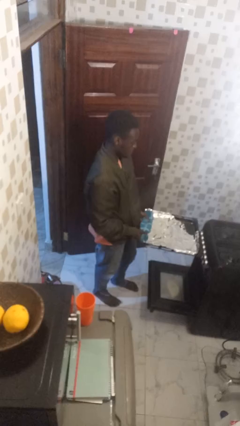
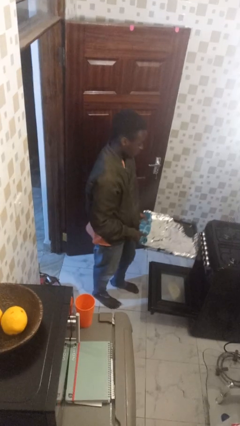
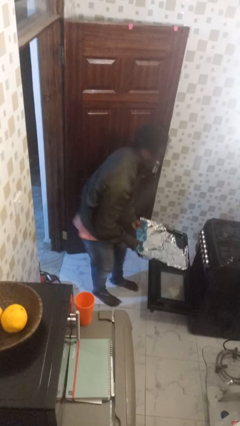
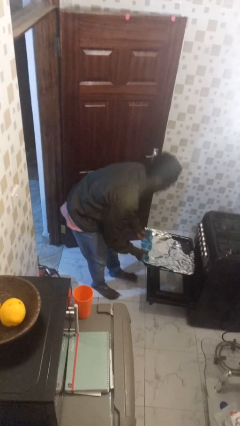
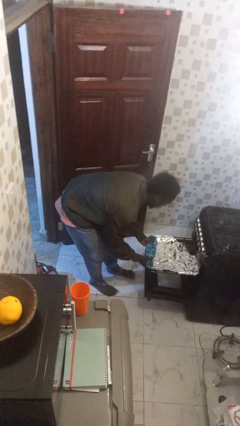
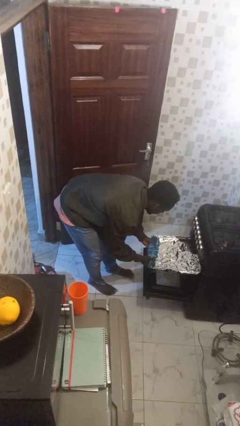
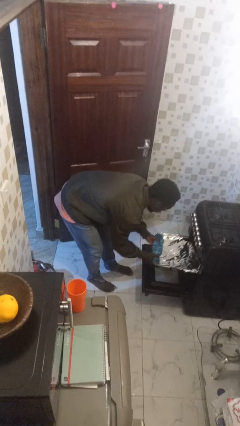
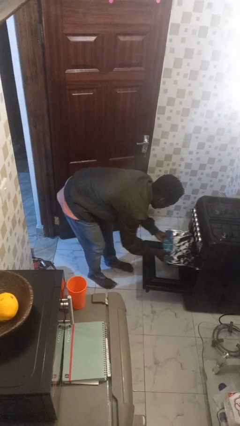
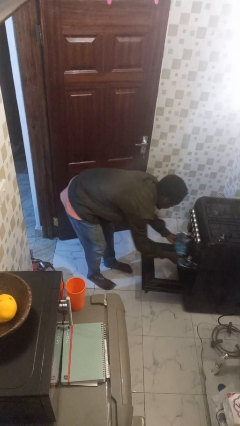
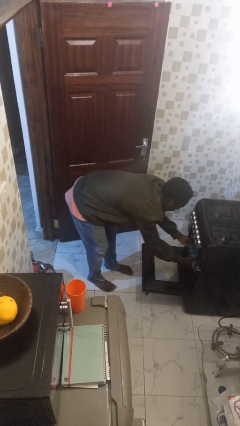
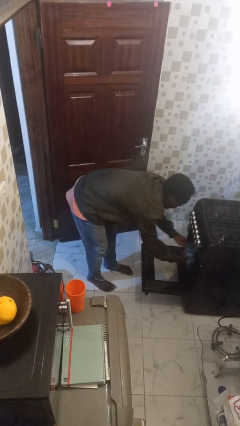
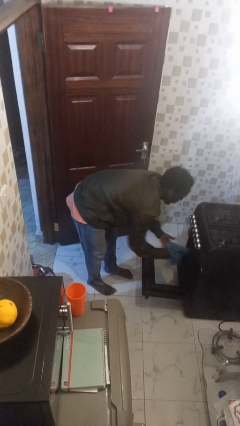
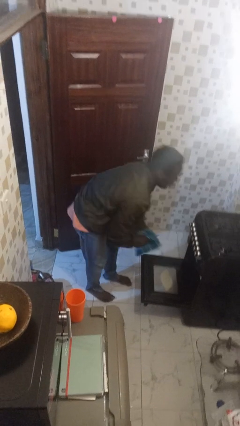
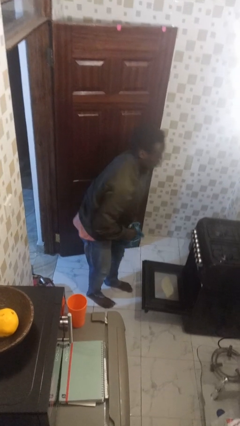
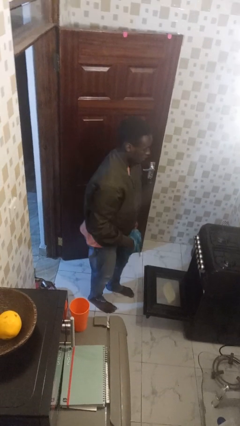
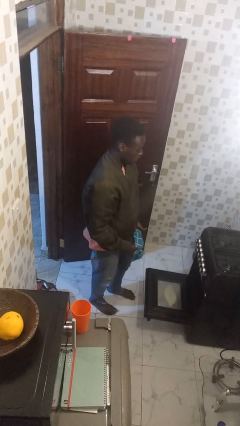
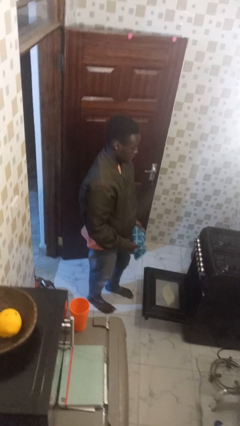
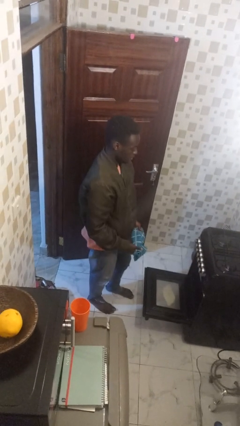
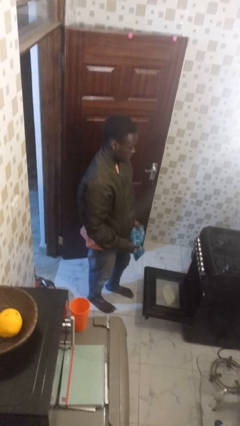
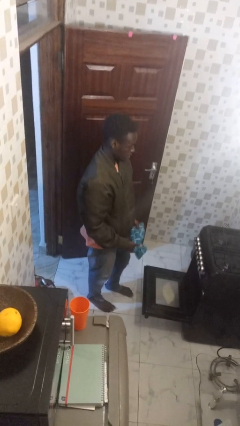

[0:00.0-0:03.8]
person puts object into oven

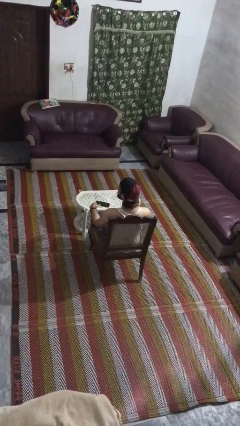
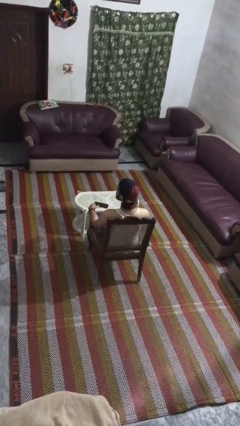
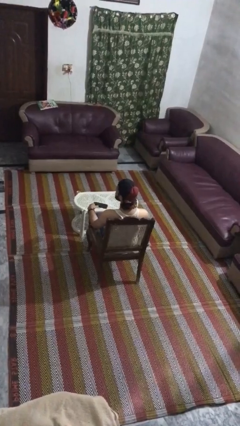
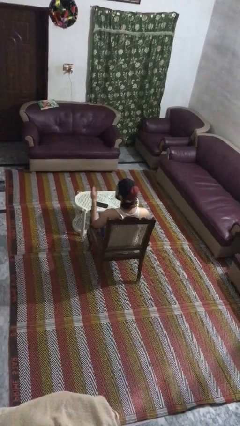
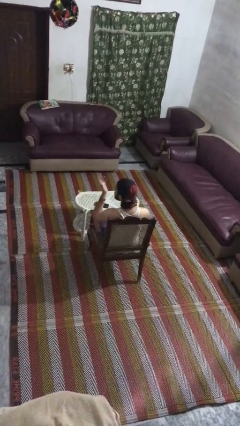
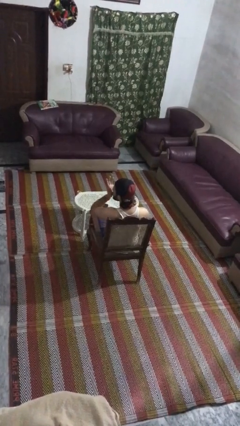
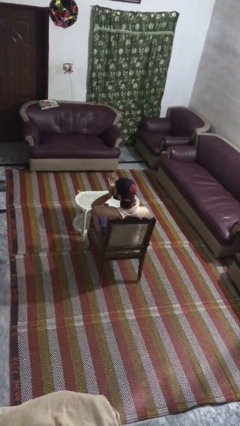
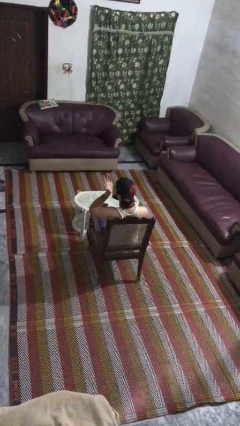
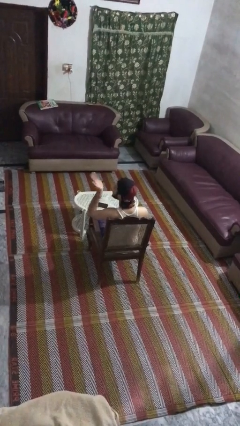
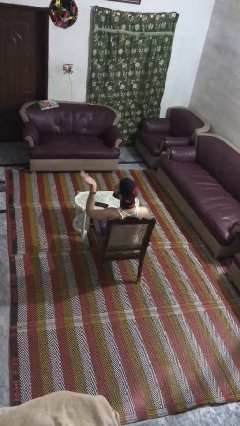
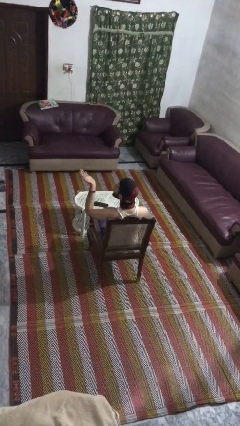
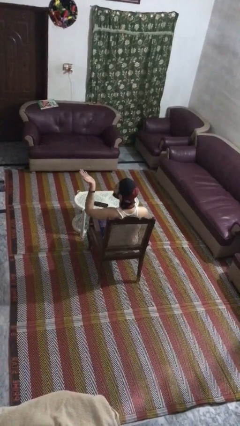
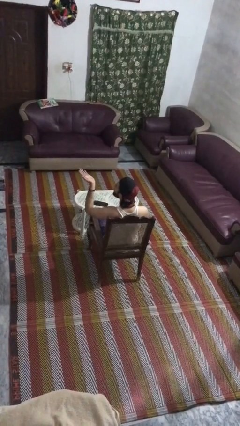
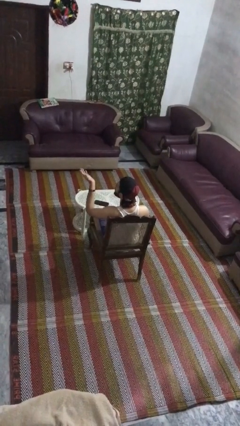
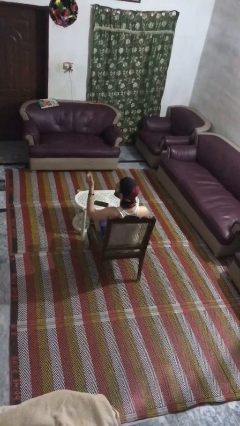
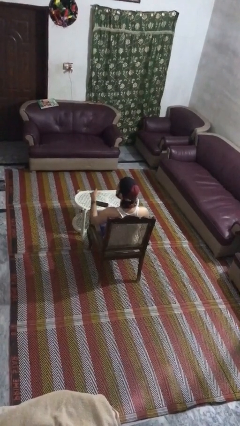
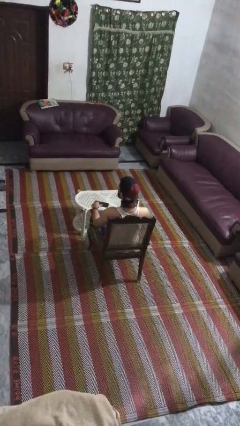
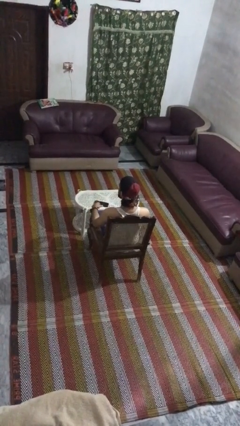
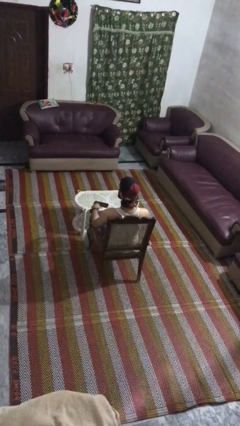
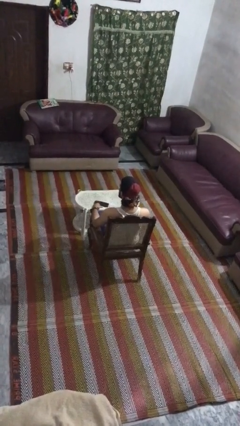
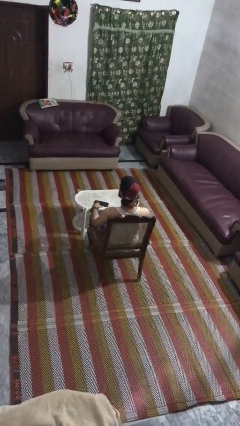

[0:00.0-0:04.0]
person gestures blow kiss

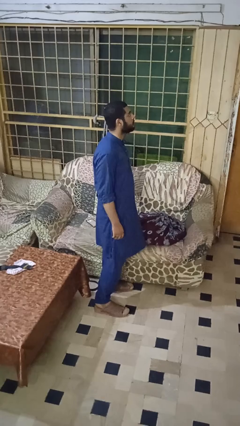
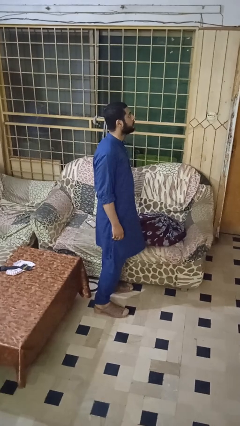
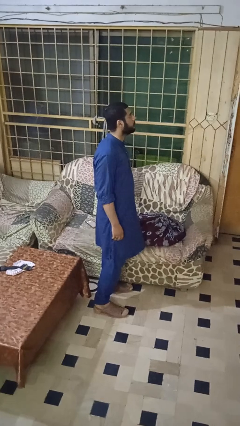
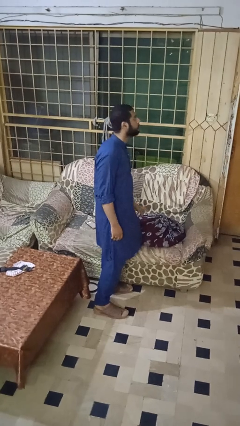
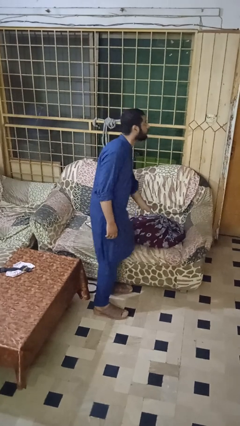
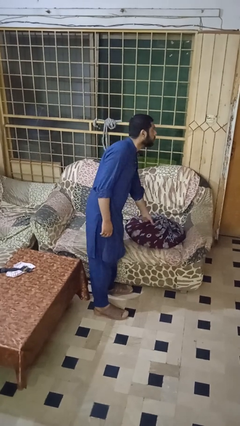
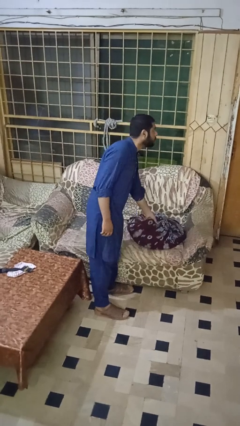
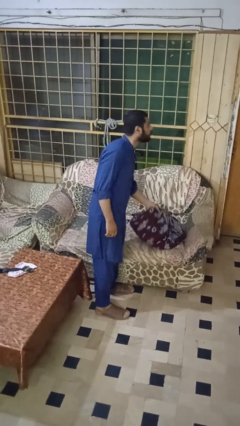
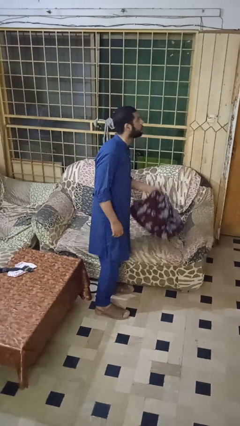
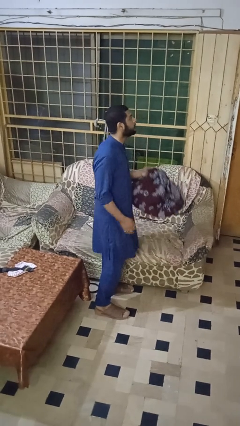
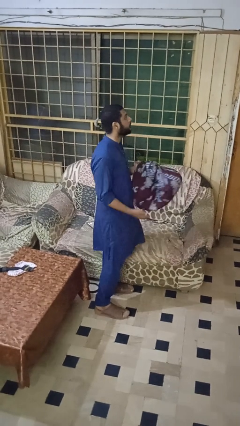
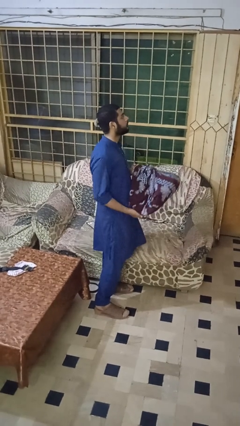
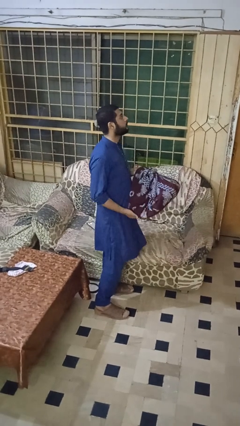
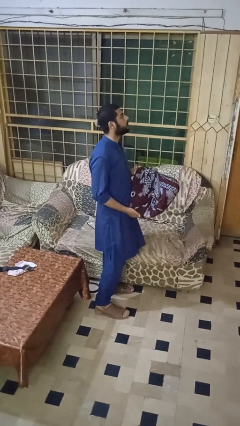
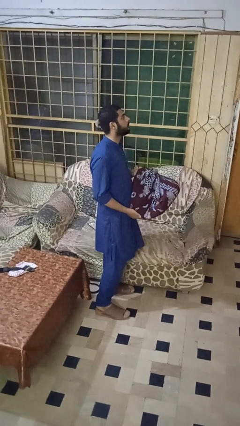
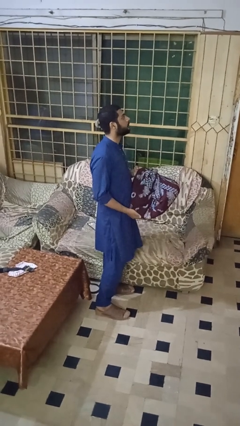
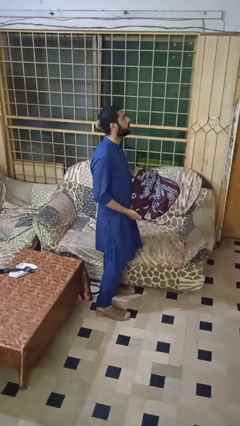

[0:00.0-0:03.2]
person picks up object from couch

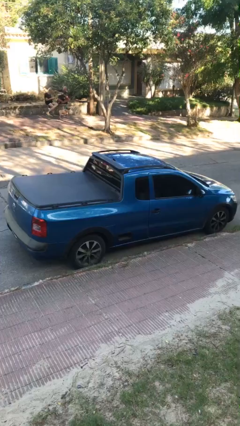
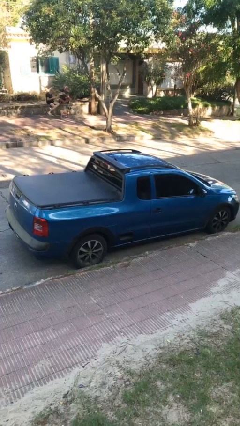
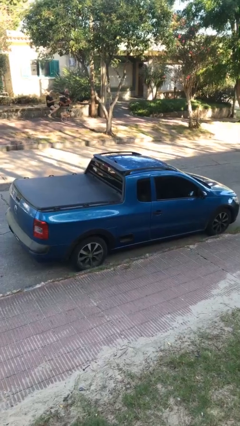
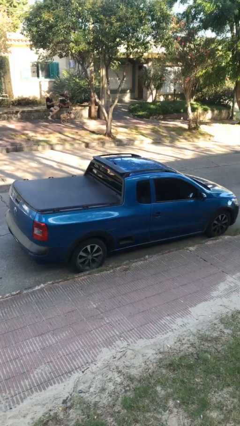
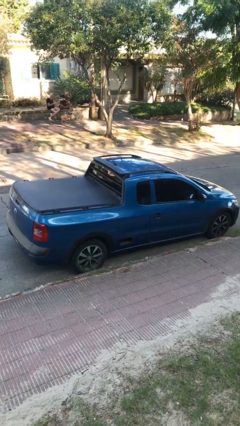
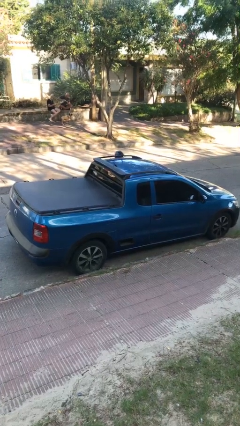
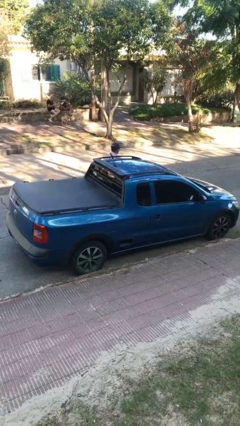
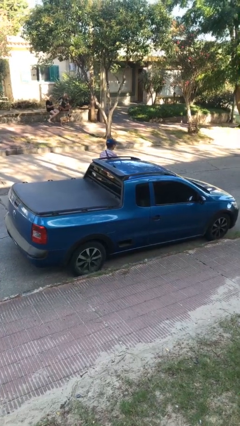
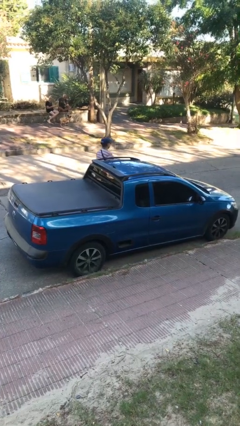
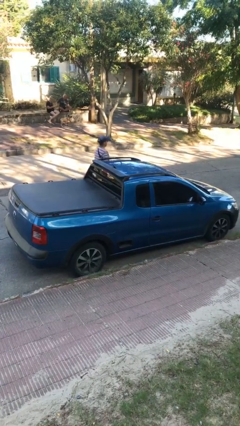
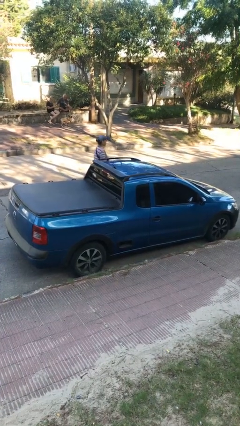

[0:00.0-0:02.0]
car drops off person

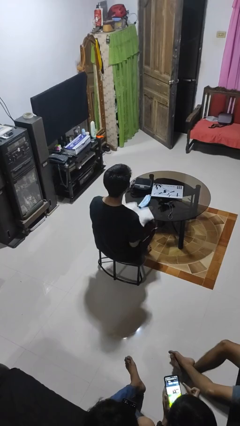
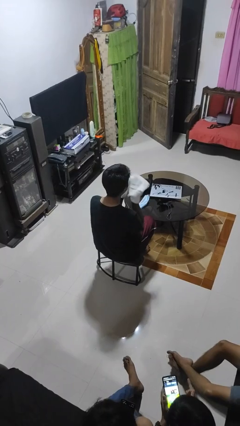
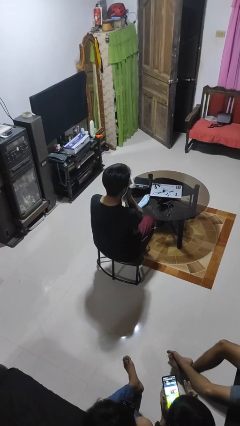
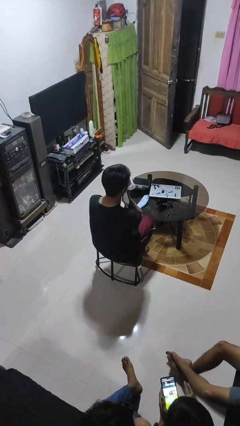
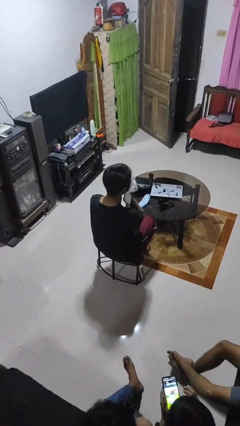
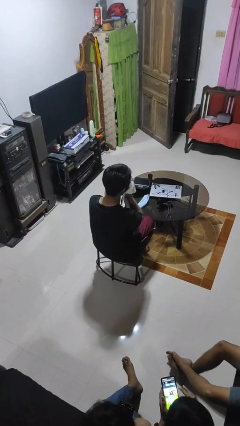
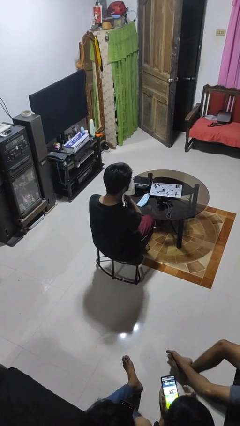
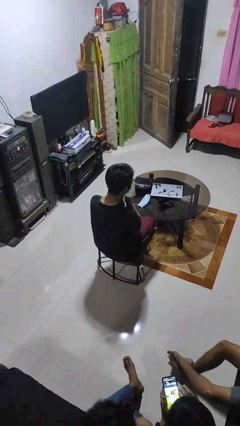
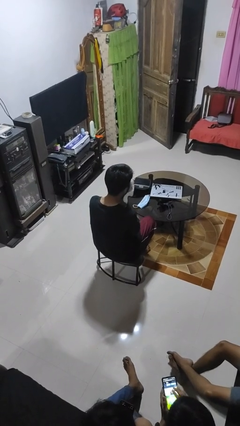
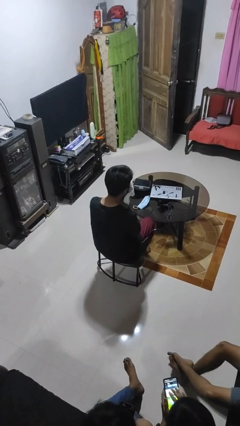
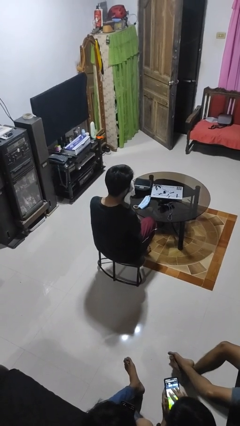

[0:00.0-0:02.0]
person wipes mouth with napkin

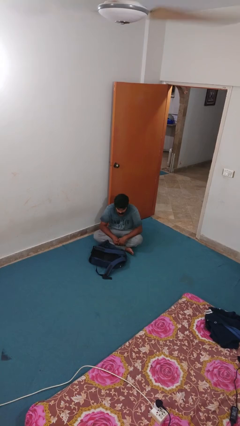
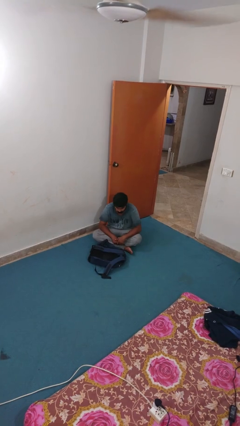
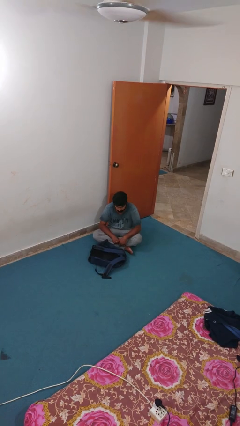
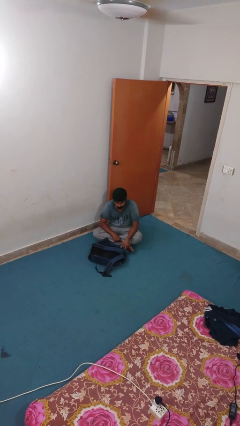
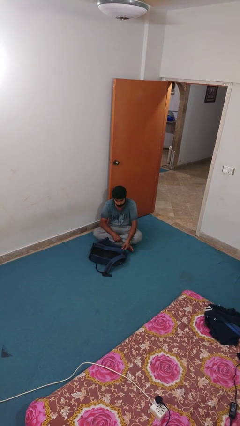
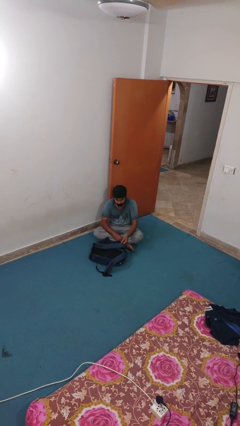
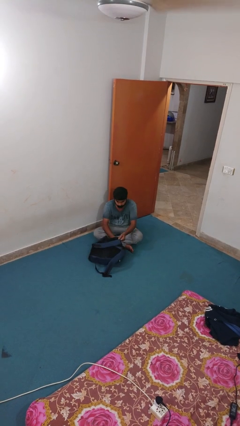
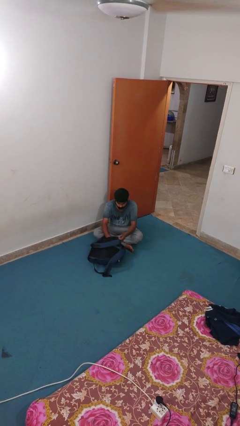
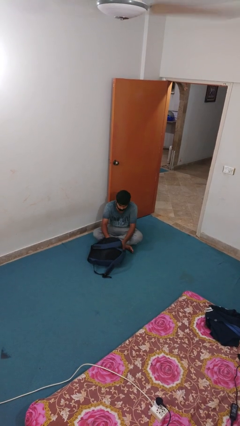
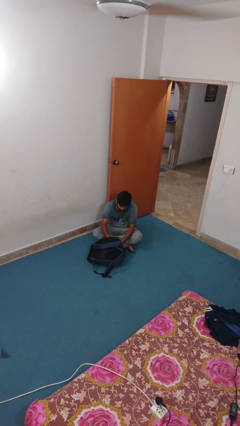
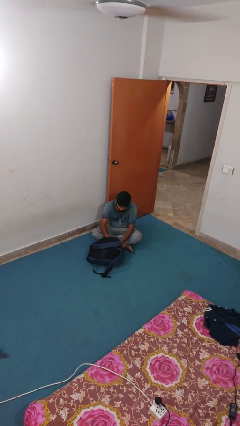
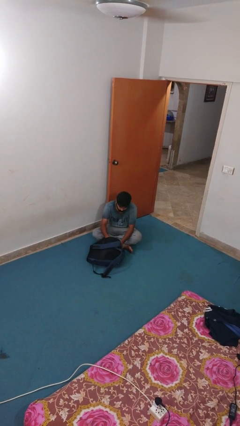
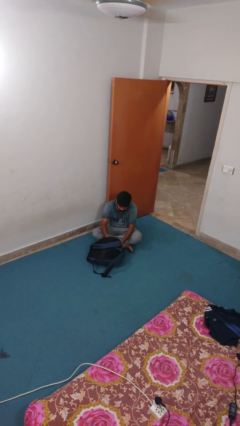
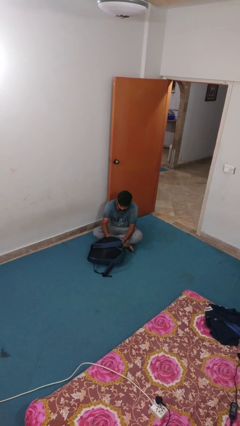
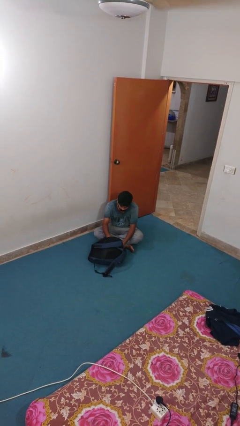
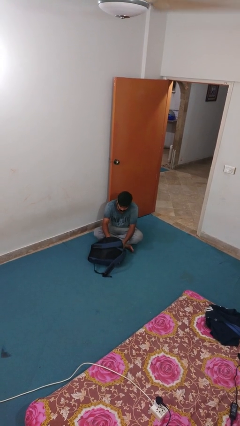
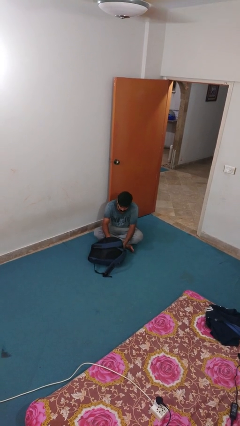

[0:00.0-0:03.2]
person searches in backpack
